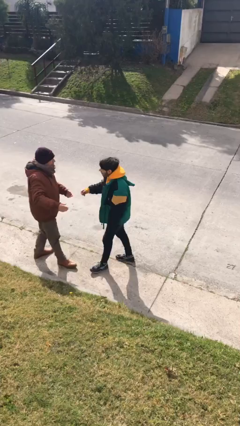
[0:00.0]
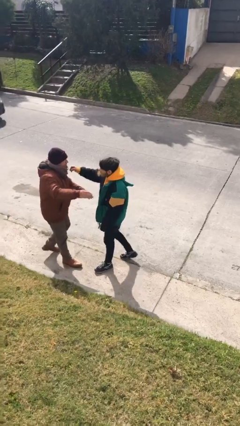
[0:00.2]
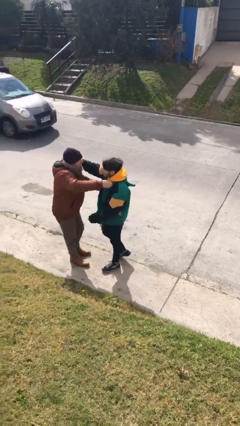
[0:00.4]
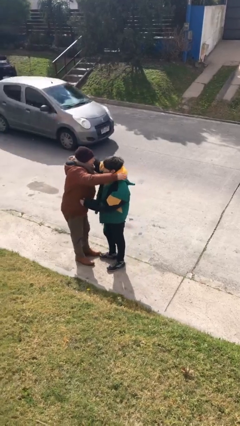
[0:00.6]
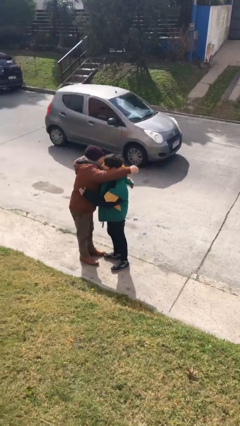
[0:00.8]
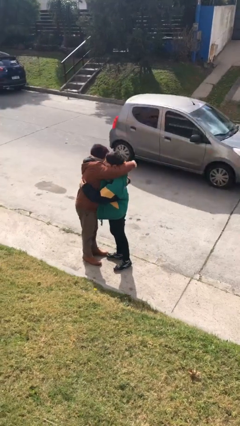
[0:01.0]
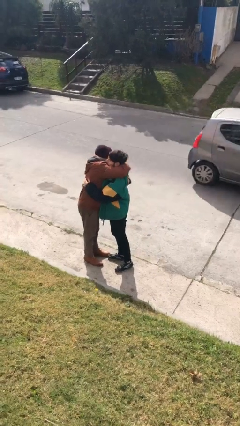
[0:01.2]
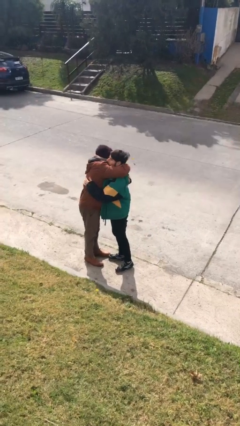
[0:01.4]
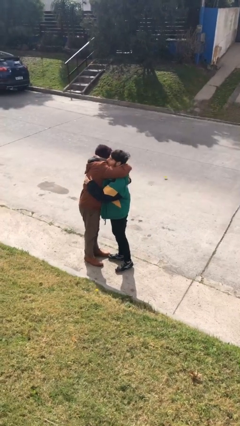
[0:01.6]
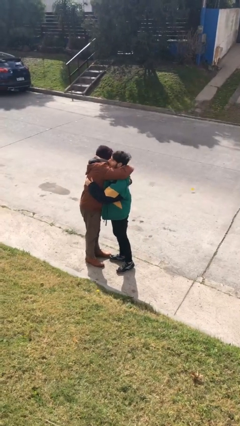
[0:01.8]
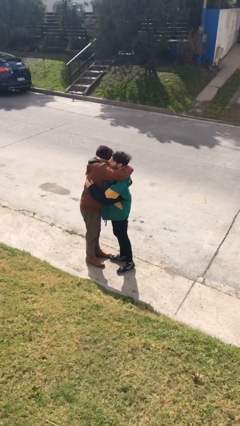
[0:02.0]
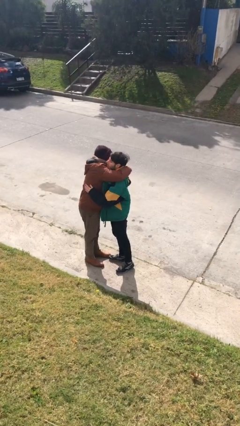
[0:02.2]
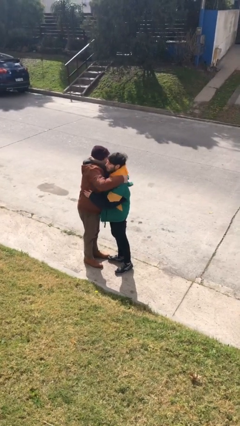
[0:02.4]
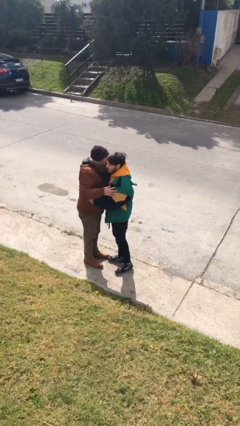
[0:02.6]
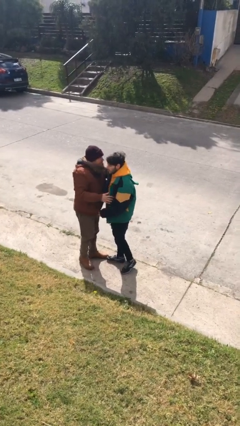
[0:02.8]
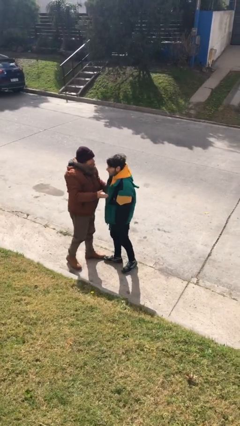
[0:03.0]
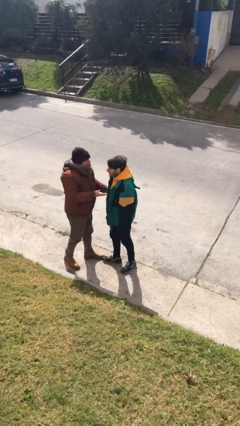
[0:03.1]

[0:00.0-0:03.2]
person embraces person

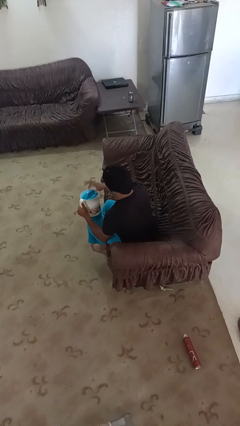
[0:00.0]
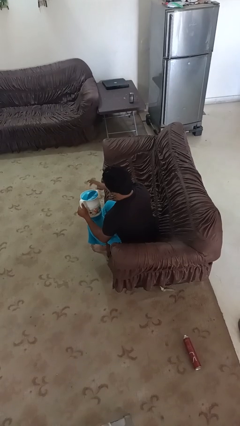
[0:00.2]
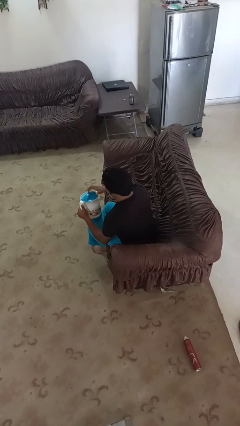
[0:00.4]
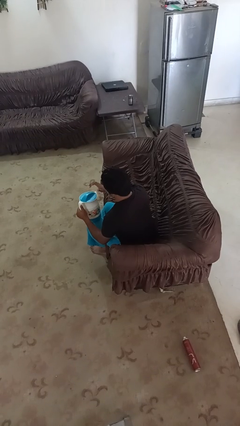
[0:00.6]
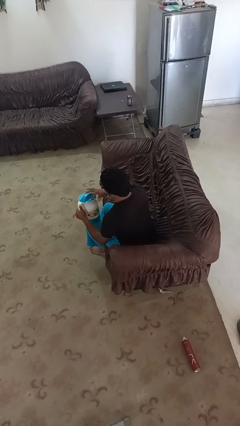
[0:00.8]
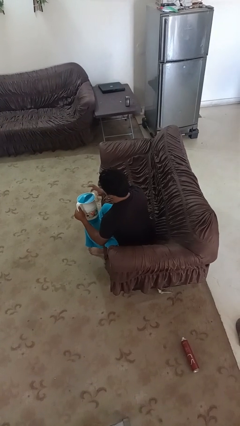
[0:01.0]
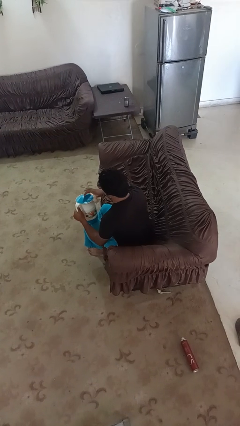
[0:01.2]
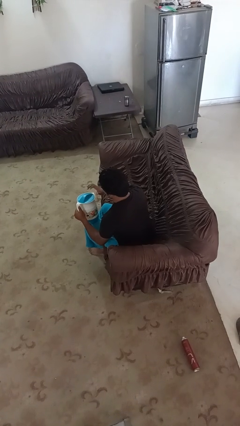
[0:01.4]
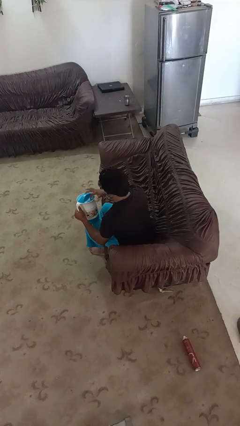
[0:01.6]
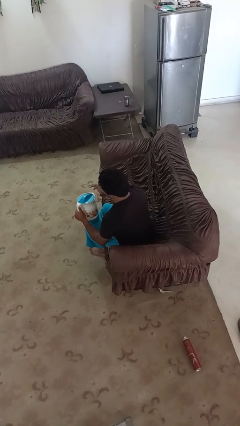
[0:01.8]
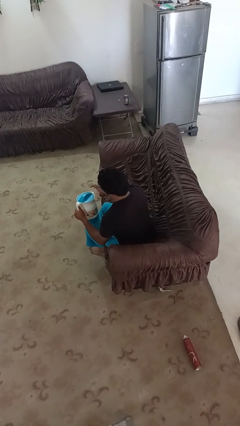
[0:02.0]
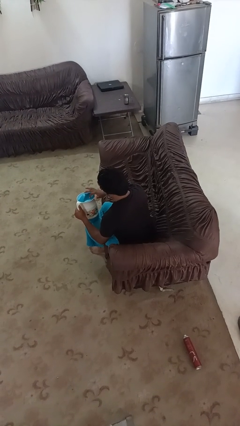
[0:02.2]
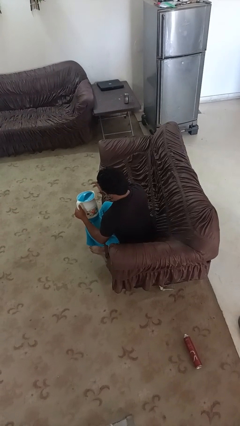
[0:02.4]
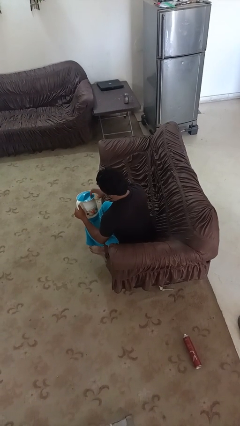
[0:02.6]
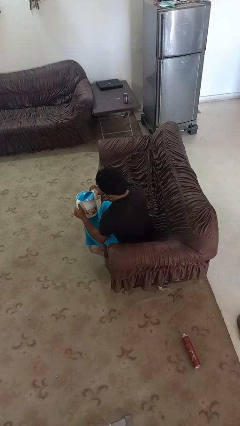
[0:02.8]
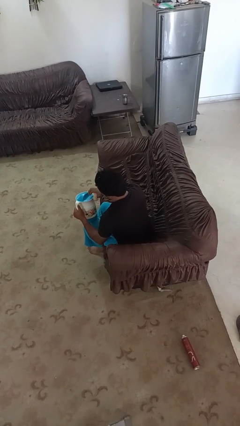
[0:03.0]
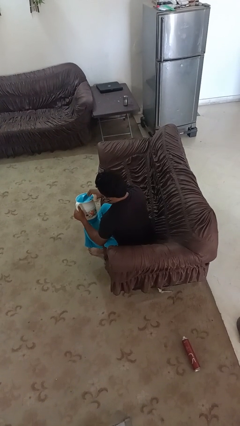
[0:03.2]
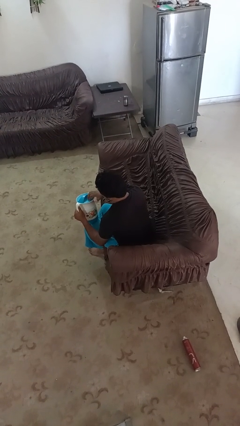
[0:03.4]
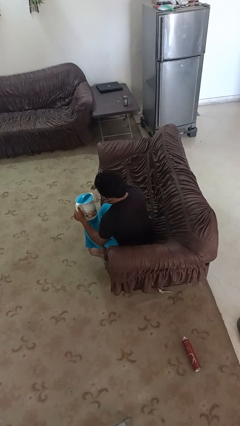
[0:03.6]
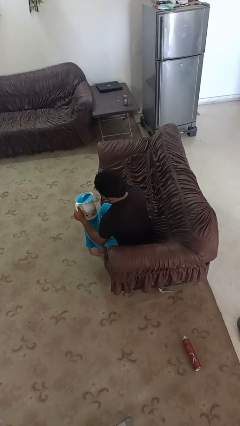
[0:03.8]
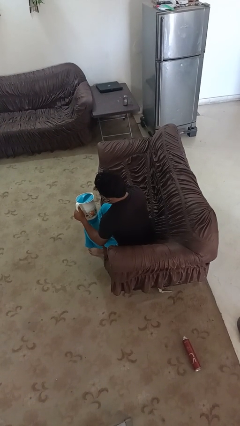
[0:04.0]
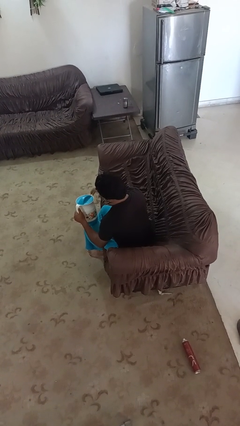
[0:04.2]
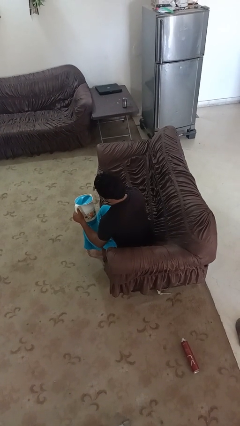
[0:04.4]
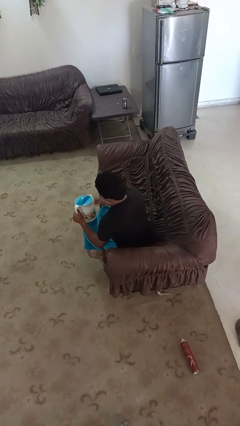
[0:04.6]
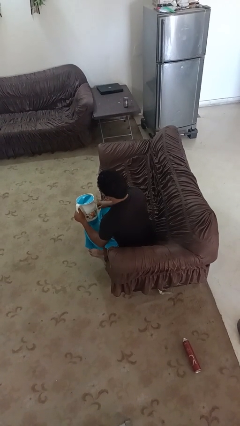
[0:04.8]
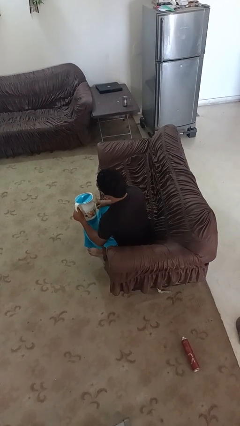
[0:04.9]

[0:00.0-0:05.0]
person taps object with finger

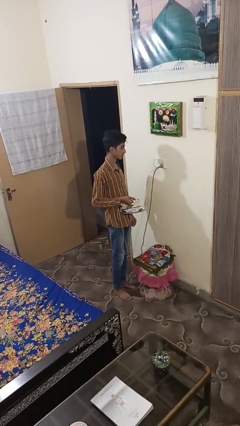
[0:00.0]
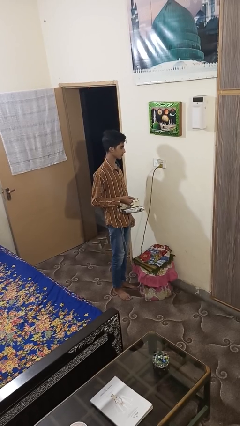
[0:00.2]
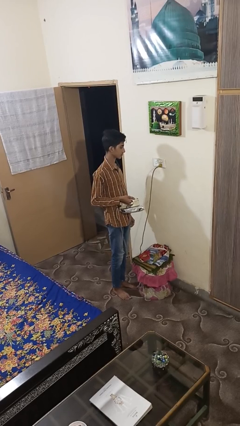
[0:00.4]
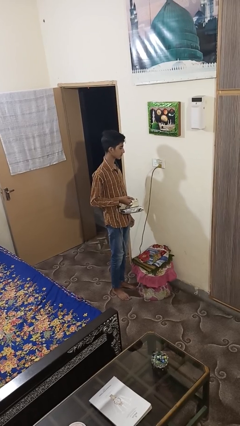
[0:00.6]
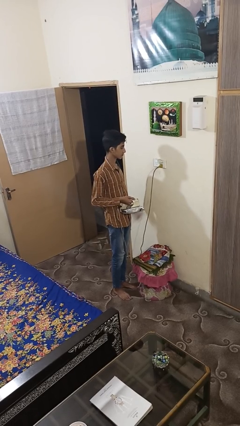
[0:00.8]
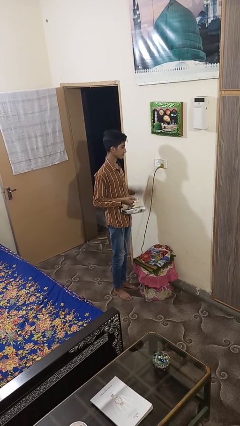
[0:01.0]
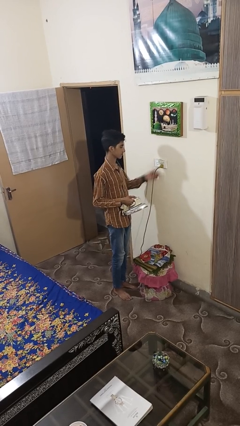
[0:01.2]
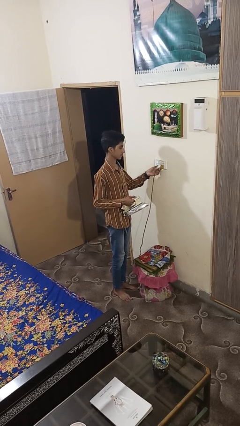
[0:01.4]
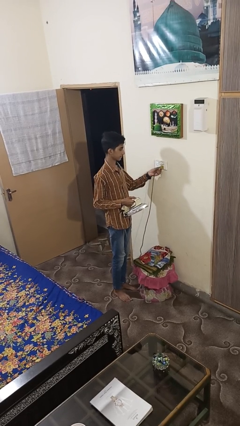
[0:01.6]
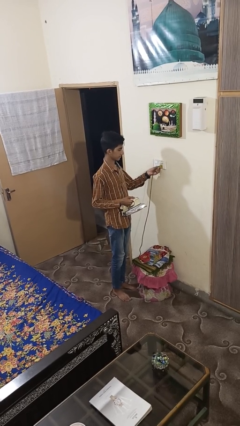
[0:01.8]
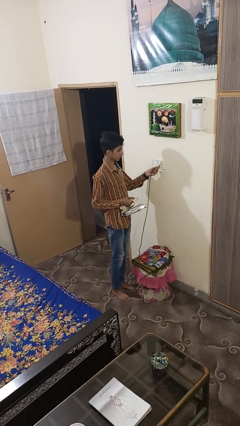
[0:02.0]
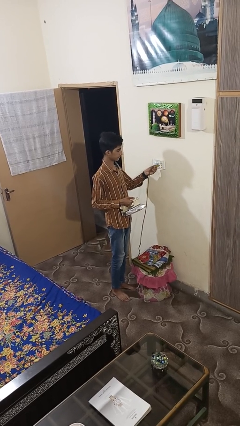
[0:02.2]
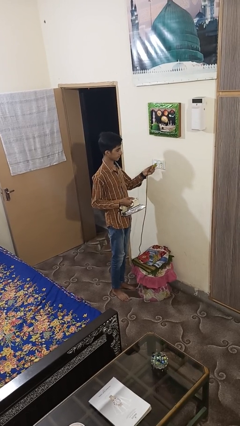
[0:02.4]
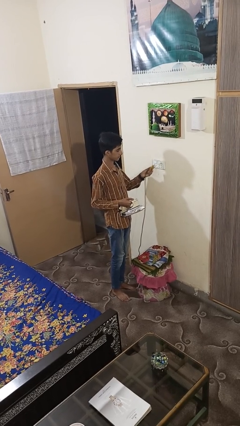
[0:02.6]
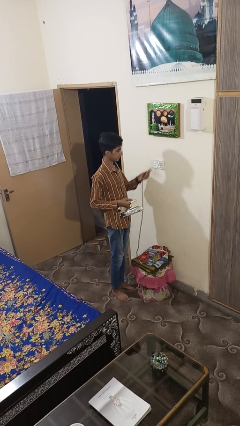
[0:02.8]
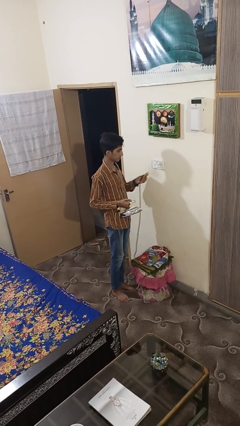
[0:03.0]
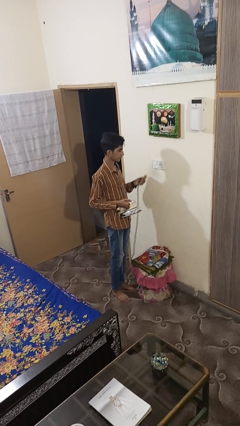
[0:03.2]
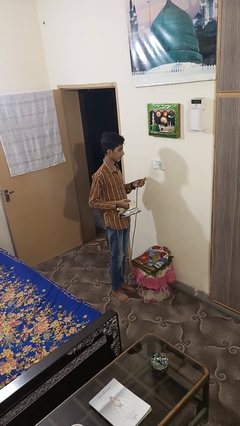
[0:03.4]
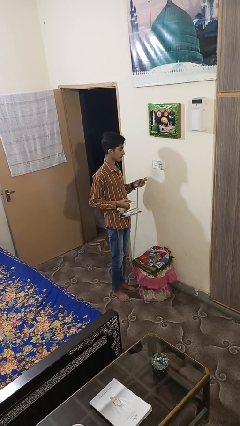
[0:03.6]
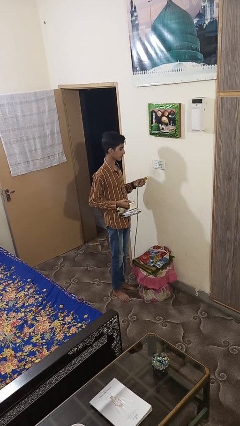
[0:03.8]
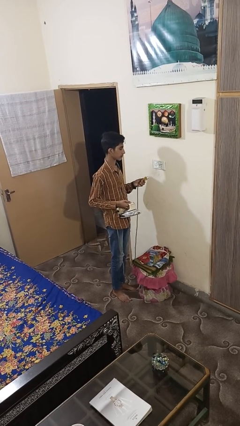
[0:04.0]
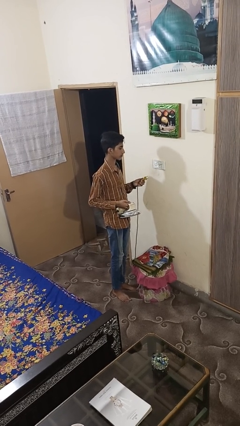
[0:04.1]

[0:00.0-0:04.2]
person unplugs from electrical socket

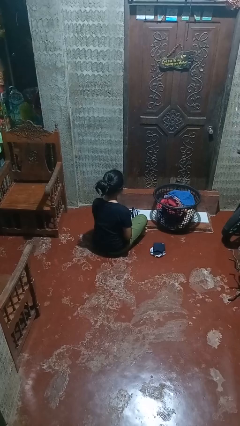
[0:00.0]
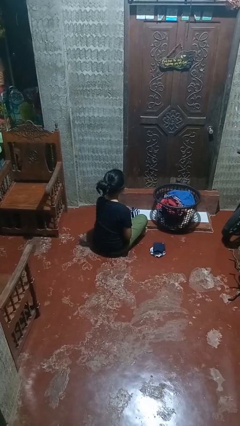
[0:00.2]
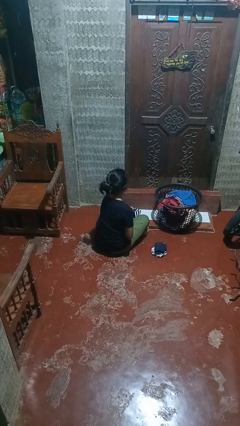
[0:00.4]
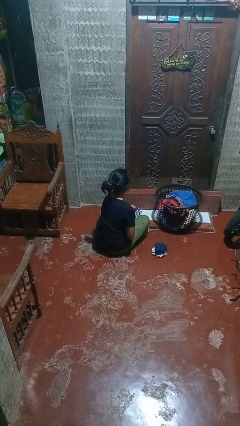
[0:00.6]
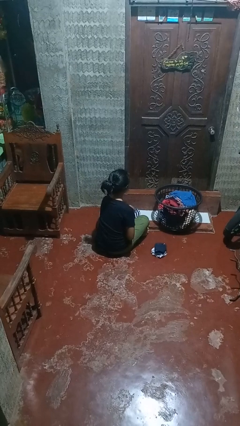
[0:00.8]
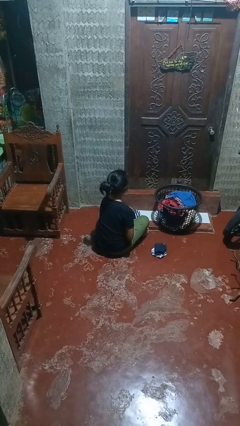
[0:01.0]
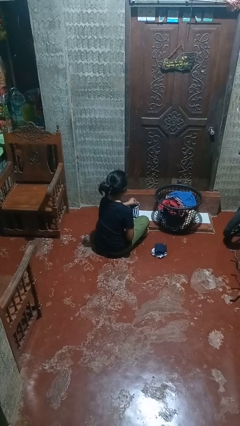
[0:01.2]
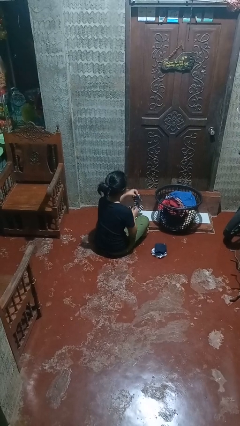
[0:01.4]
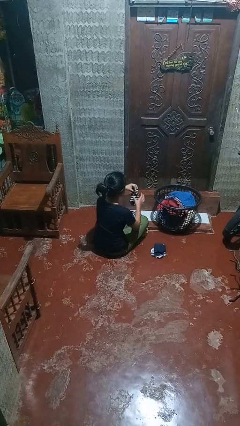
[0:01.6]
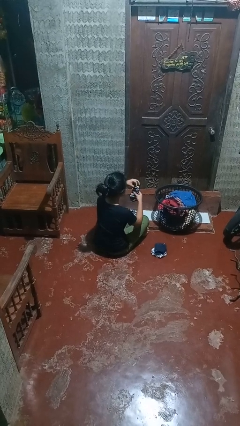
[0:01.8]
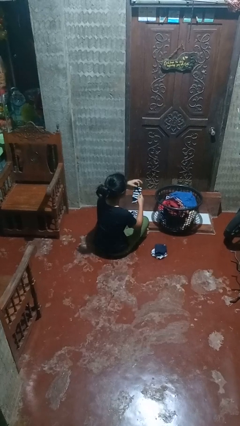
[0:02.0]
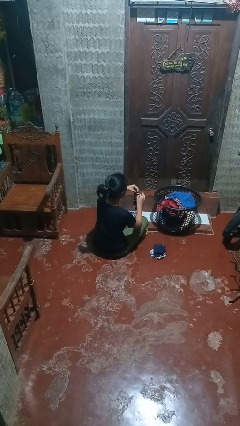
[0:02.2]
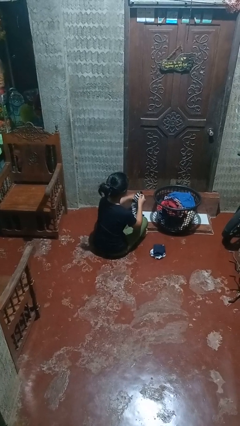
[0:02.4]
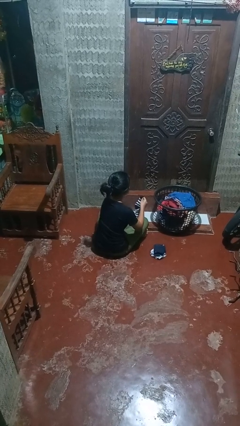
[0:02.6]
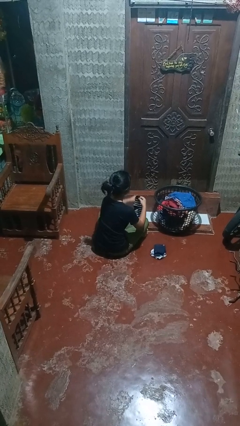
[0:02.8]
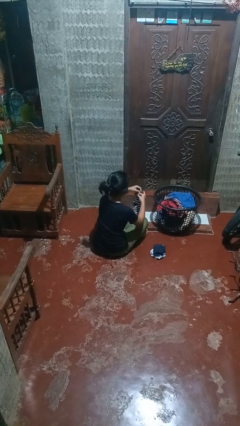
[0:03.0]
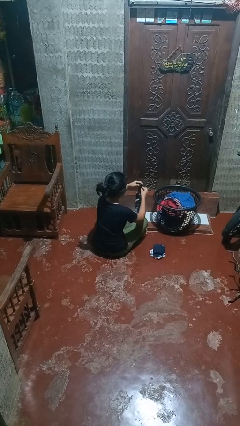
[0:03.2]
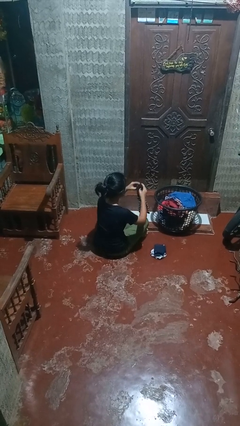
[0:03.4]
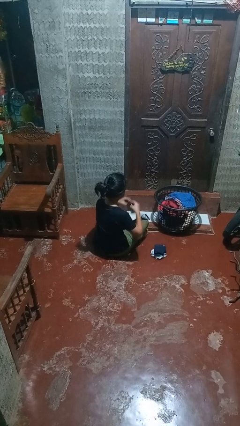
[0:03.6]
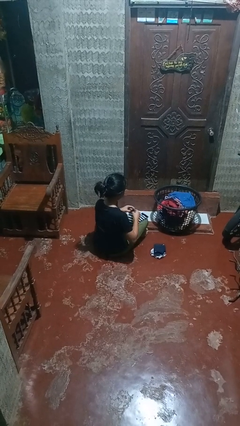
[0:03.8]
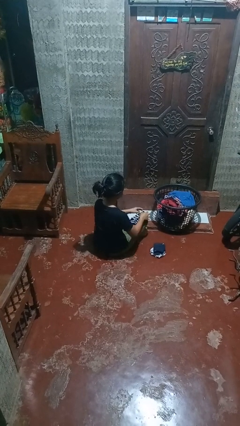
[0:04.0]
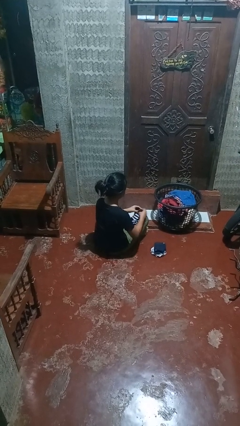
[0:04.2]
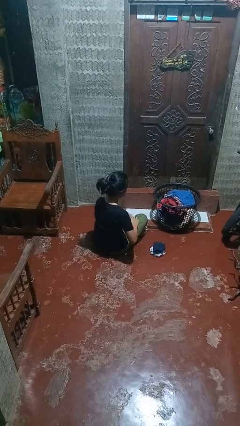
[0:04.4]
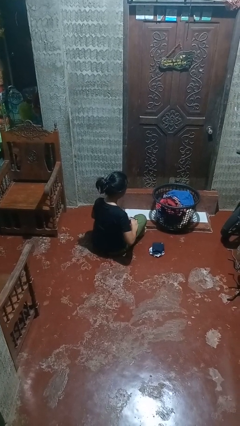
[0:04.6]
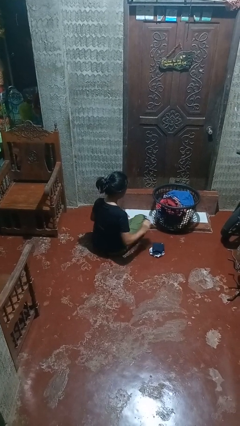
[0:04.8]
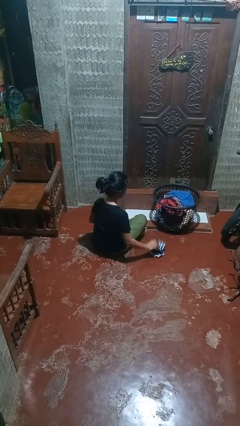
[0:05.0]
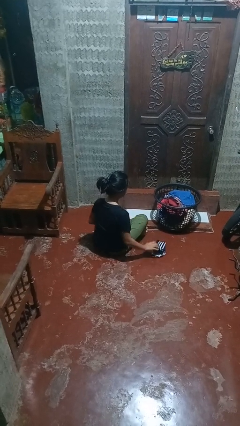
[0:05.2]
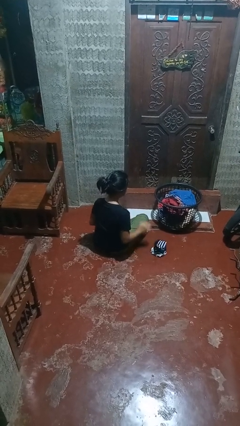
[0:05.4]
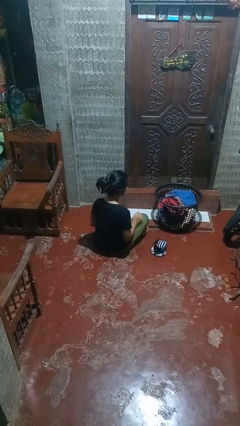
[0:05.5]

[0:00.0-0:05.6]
person folds socks
